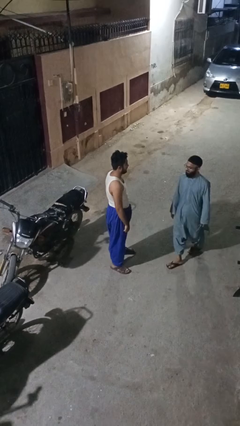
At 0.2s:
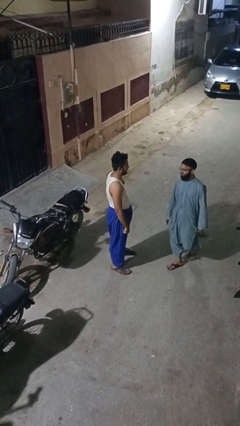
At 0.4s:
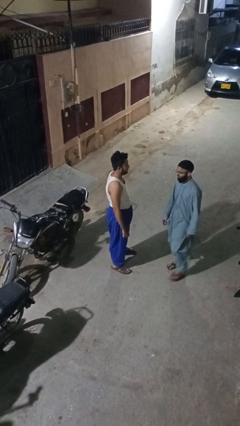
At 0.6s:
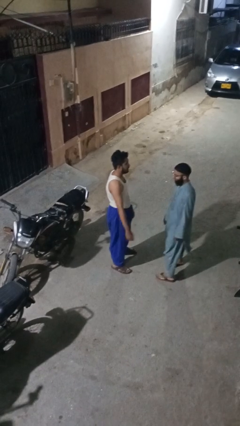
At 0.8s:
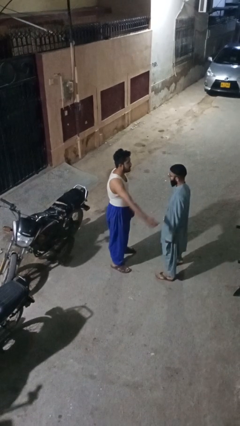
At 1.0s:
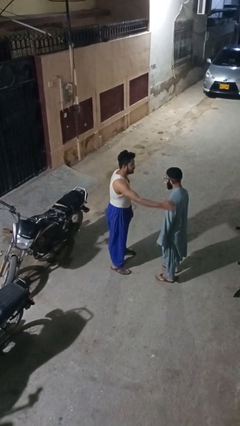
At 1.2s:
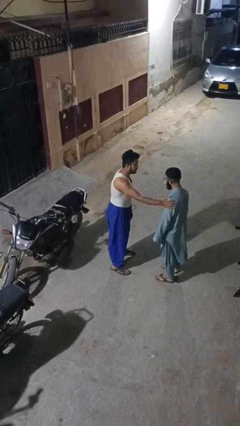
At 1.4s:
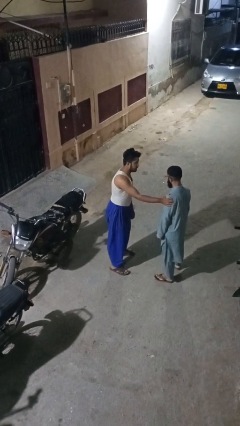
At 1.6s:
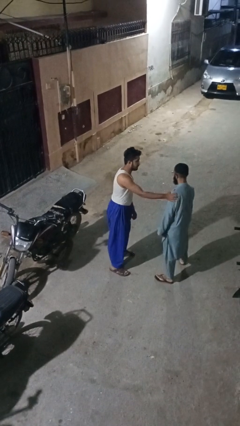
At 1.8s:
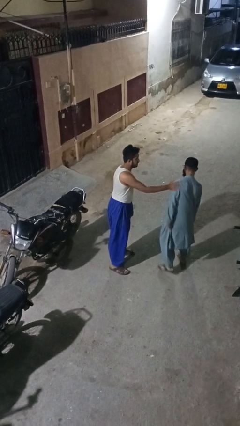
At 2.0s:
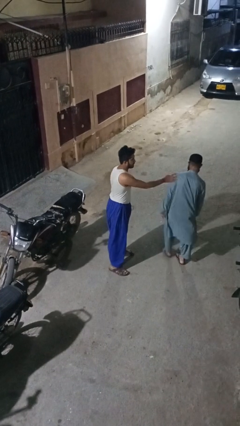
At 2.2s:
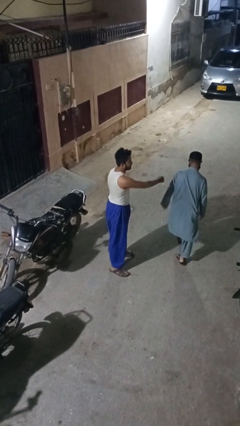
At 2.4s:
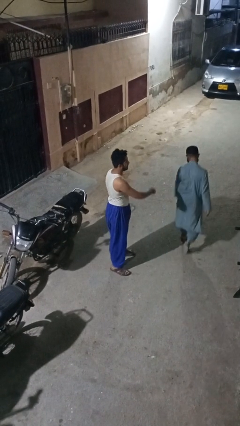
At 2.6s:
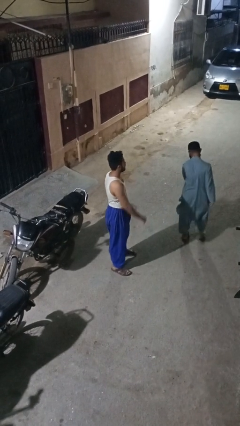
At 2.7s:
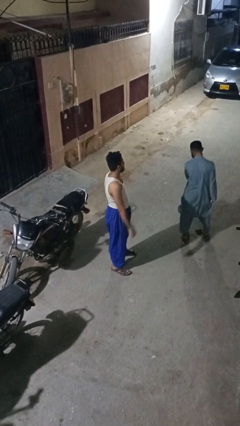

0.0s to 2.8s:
person shoves person

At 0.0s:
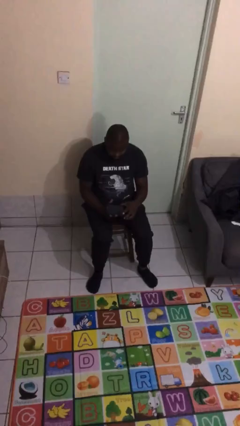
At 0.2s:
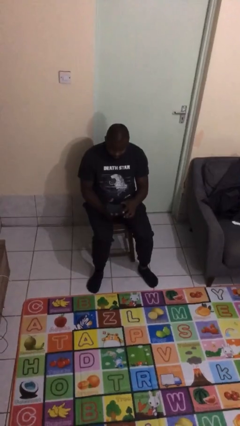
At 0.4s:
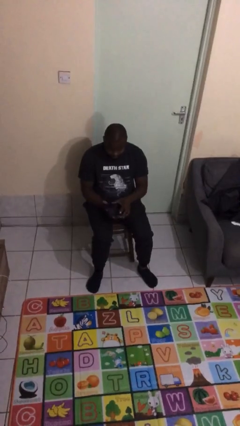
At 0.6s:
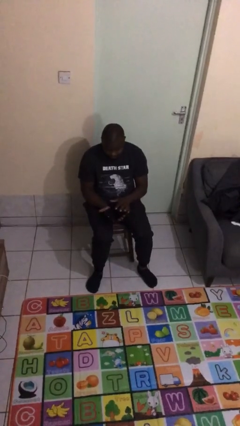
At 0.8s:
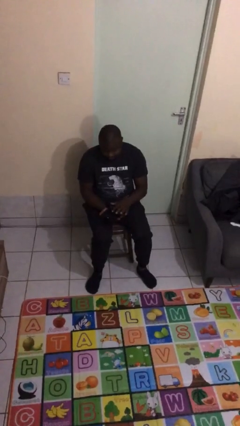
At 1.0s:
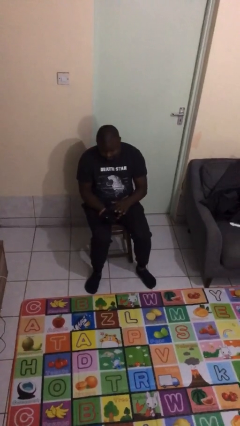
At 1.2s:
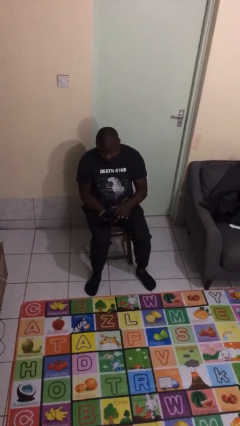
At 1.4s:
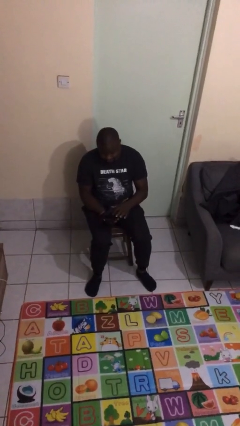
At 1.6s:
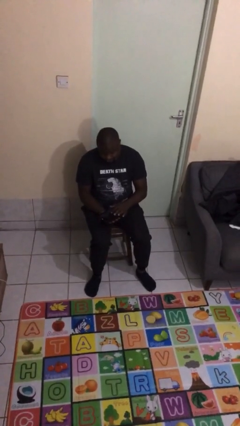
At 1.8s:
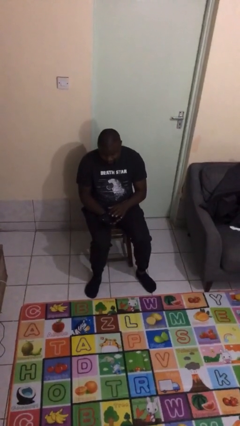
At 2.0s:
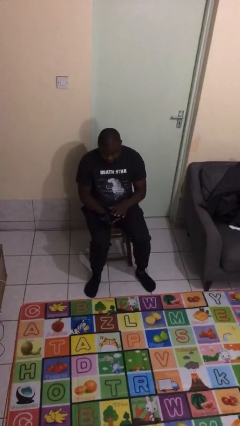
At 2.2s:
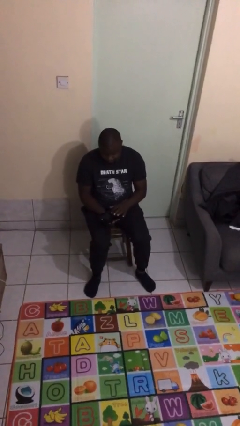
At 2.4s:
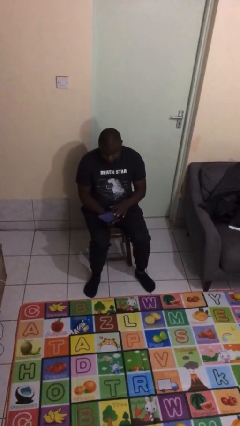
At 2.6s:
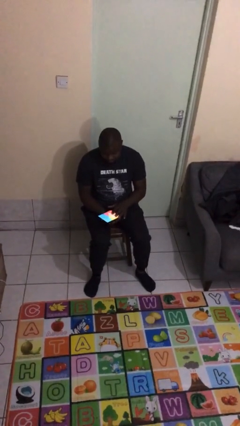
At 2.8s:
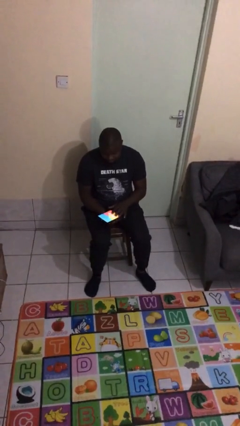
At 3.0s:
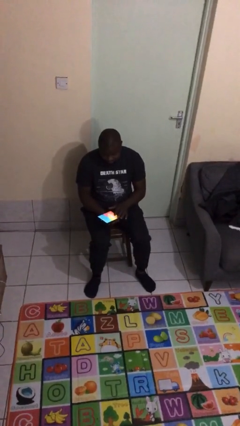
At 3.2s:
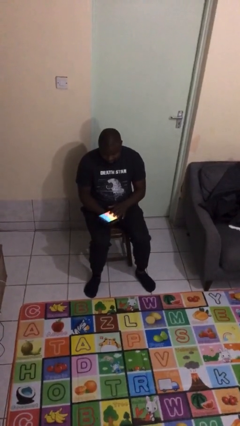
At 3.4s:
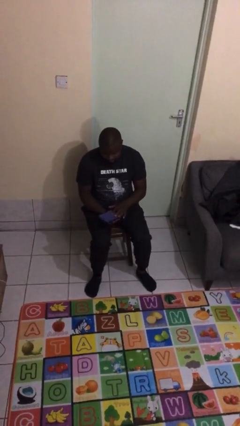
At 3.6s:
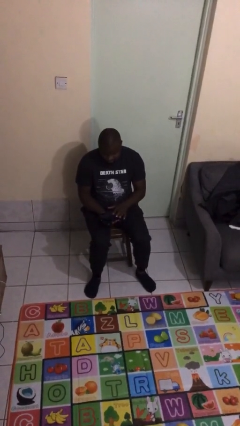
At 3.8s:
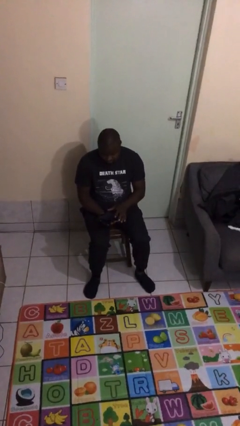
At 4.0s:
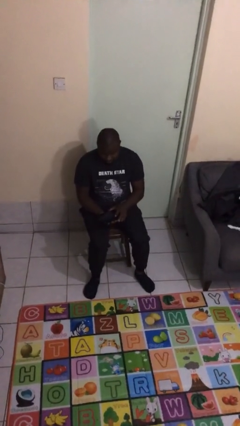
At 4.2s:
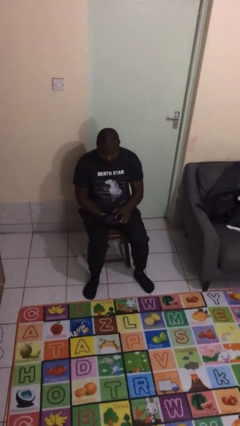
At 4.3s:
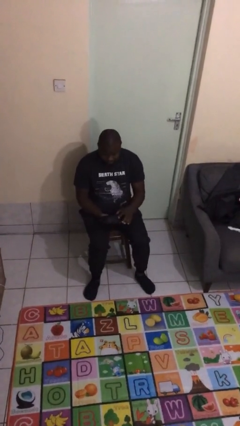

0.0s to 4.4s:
person interacts with tablet

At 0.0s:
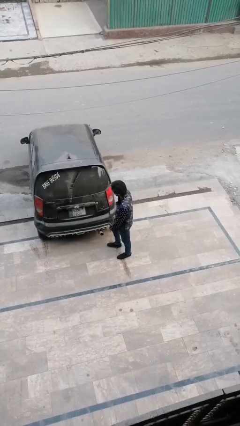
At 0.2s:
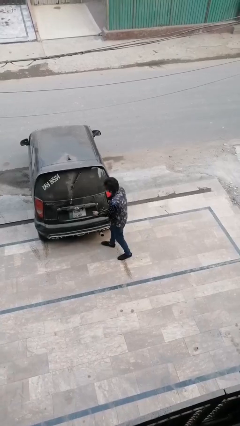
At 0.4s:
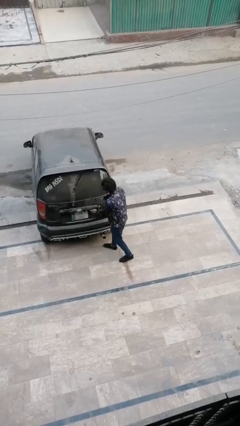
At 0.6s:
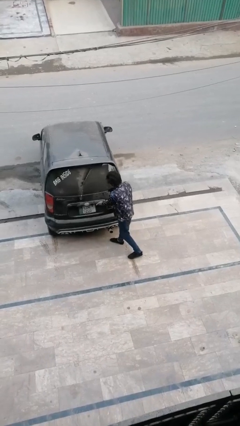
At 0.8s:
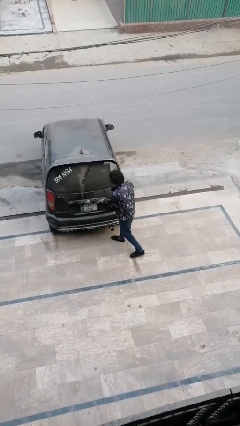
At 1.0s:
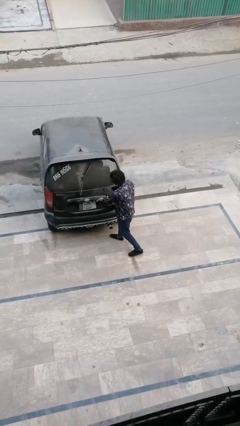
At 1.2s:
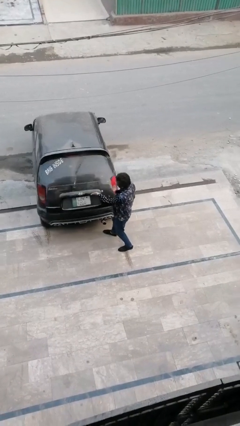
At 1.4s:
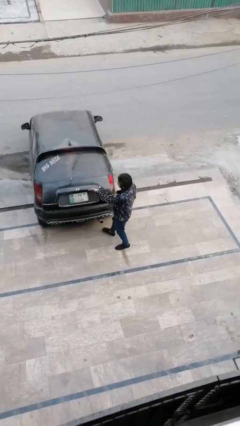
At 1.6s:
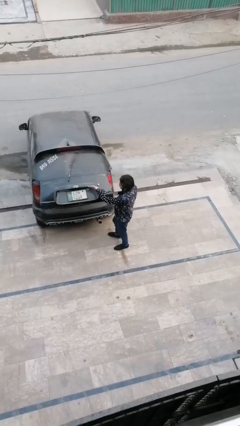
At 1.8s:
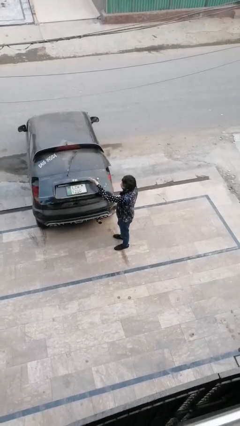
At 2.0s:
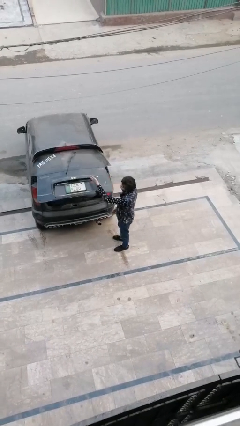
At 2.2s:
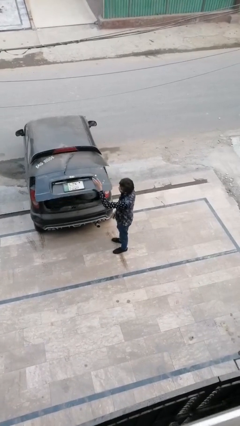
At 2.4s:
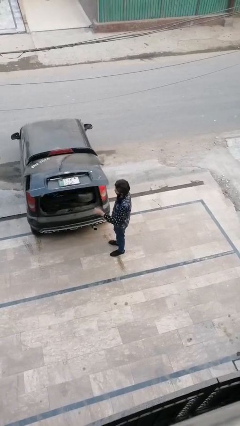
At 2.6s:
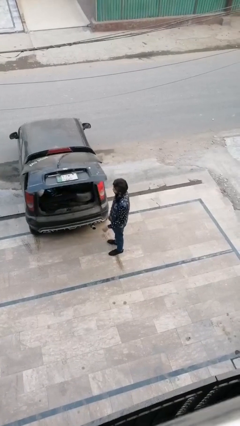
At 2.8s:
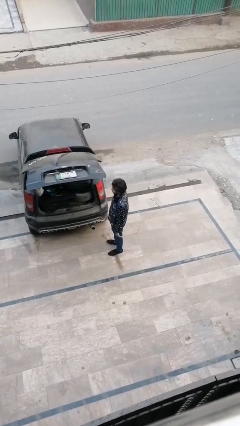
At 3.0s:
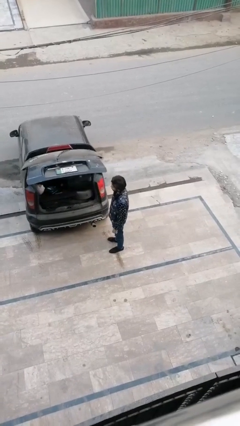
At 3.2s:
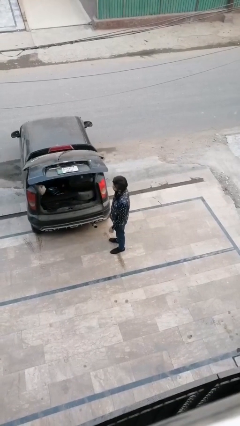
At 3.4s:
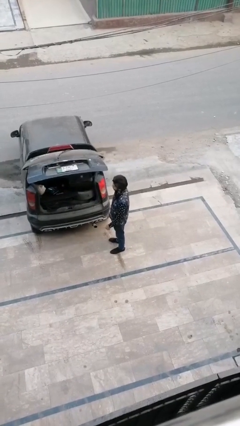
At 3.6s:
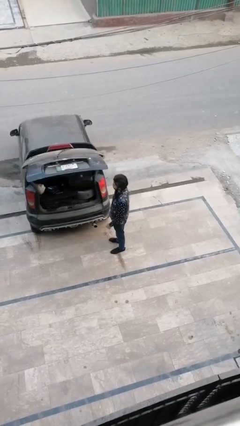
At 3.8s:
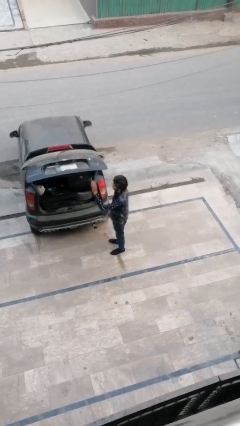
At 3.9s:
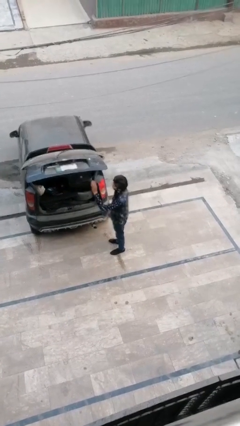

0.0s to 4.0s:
person opens car trunk

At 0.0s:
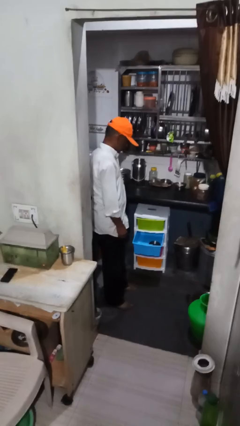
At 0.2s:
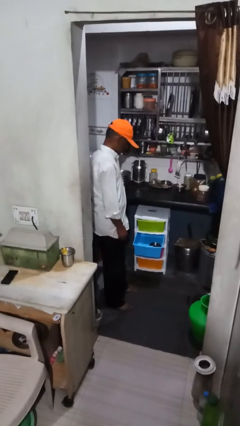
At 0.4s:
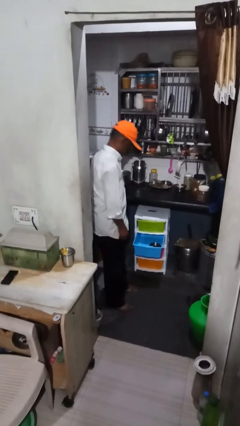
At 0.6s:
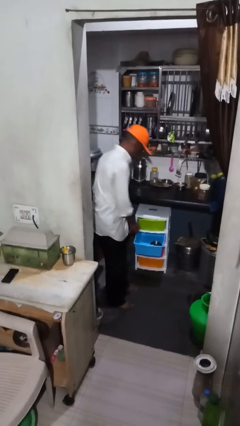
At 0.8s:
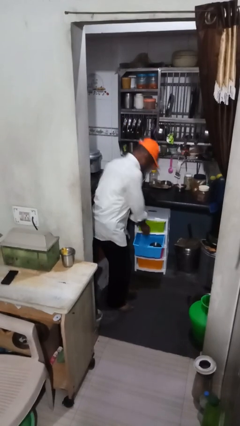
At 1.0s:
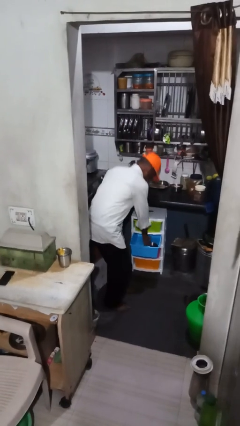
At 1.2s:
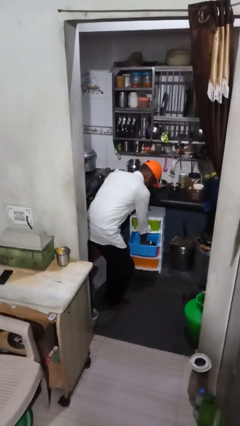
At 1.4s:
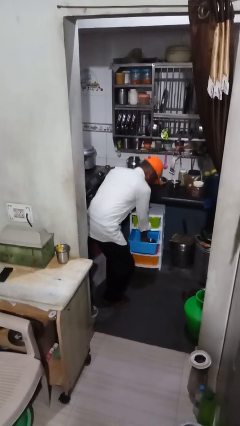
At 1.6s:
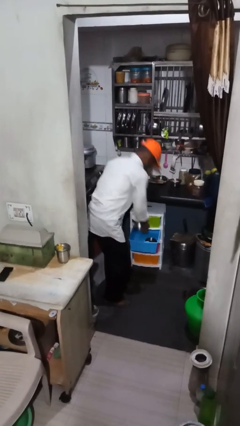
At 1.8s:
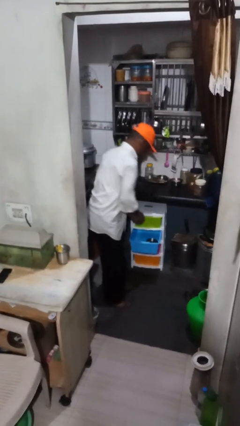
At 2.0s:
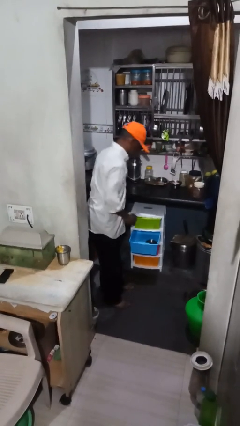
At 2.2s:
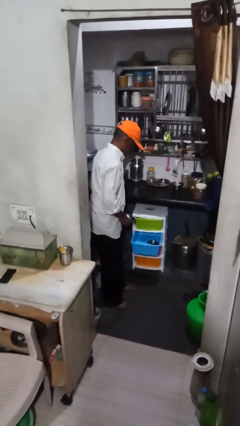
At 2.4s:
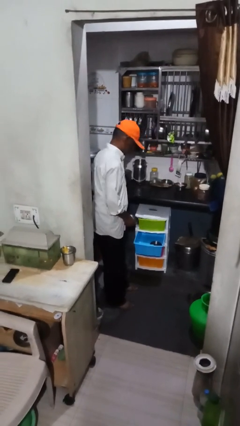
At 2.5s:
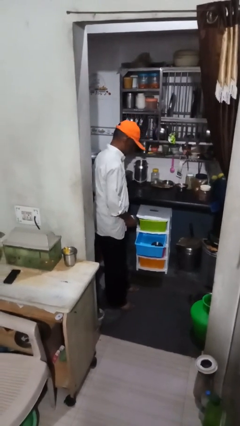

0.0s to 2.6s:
person takes object from cabinet

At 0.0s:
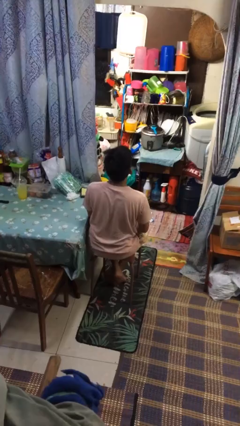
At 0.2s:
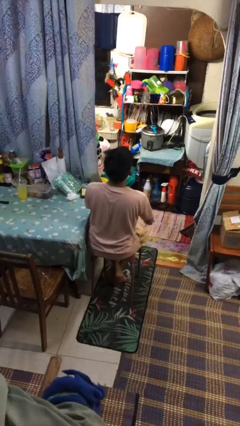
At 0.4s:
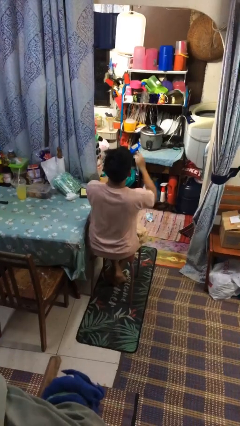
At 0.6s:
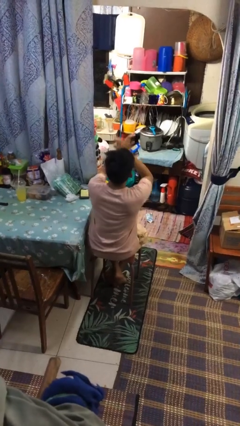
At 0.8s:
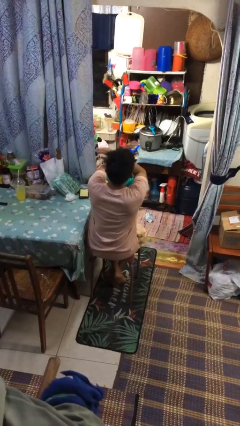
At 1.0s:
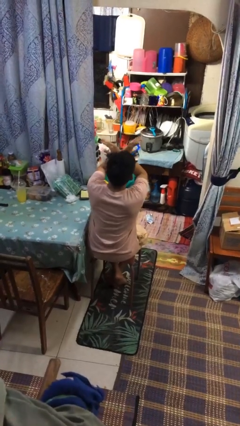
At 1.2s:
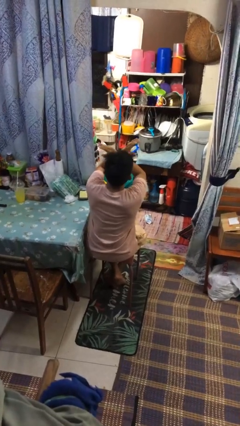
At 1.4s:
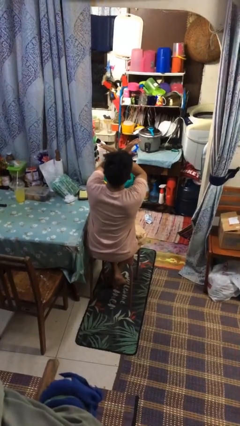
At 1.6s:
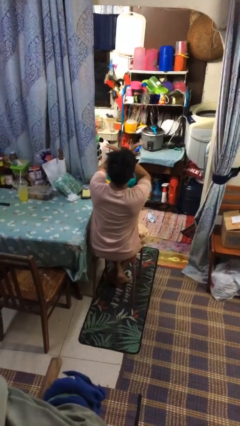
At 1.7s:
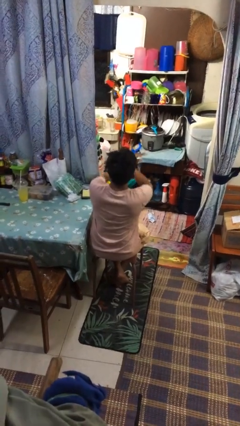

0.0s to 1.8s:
person gestures arms x

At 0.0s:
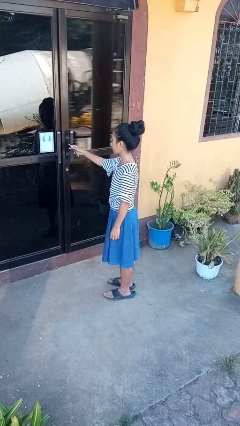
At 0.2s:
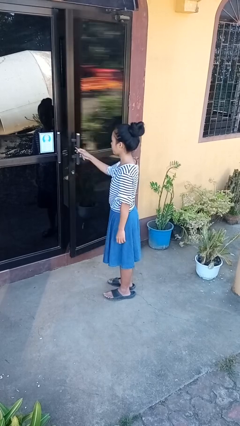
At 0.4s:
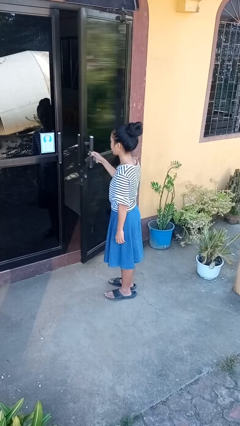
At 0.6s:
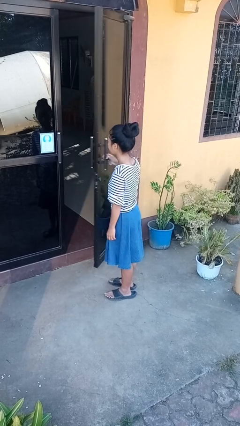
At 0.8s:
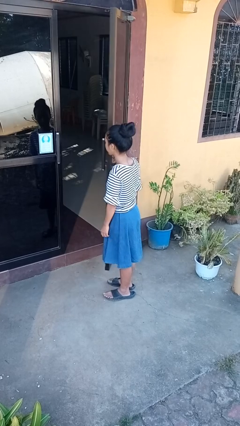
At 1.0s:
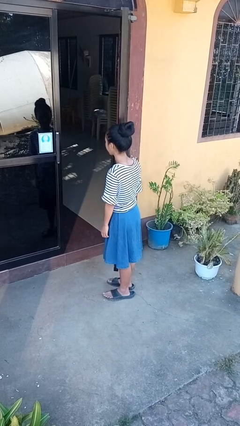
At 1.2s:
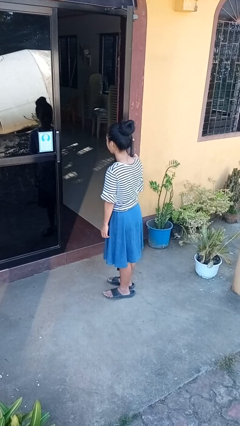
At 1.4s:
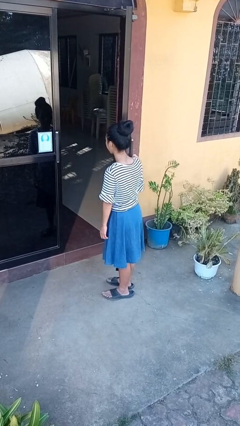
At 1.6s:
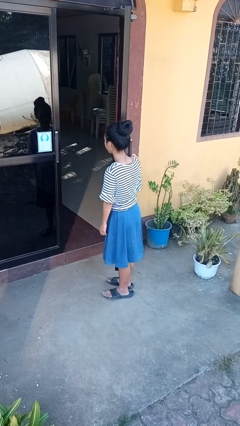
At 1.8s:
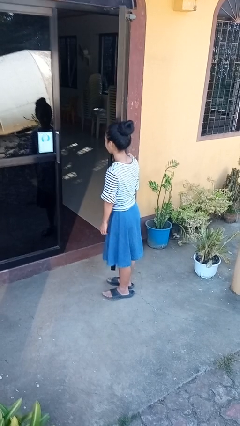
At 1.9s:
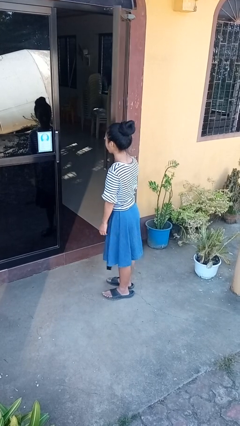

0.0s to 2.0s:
person opens facility door

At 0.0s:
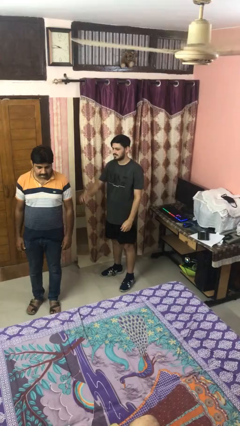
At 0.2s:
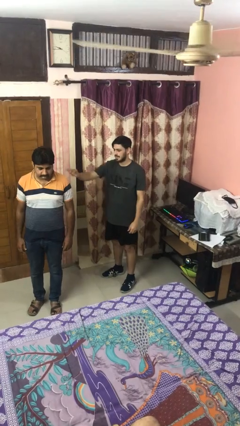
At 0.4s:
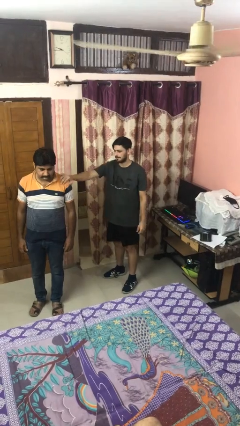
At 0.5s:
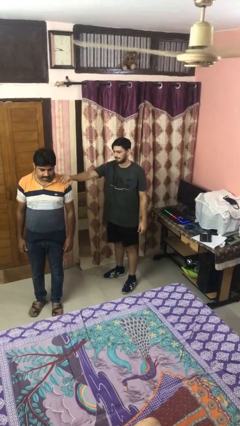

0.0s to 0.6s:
person grabs person by shoulder
